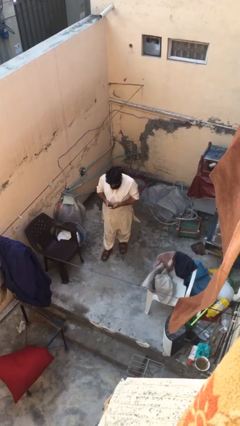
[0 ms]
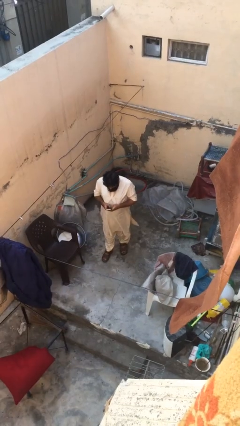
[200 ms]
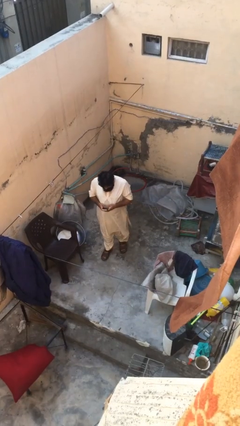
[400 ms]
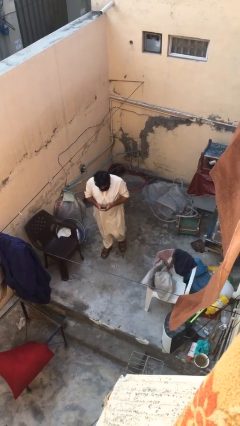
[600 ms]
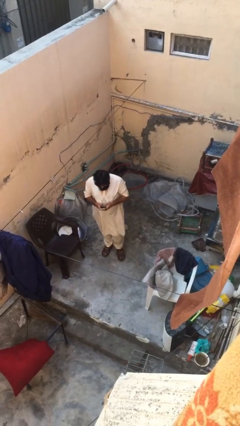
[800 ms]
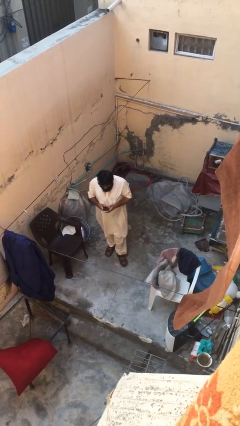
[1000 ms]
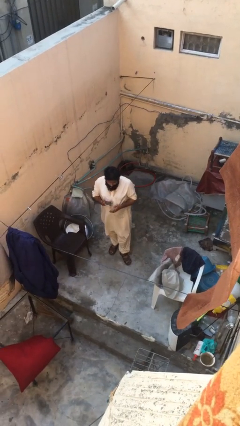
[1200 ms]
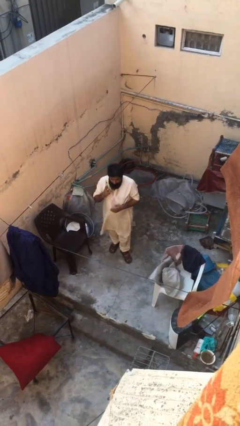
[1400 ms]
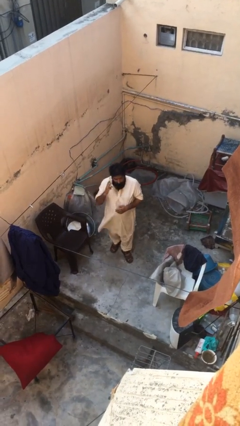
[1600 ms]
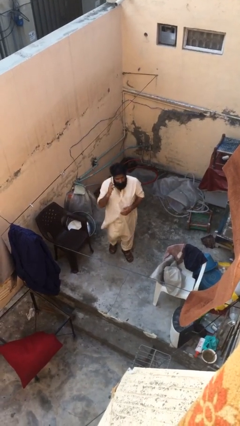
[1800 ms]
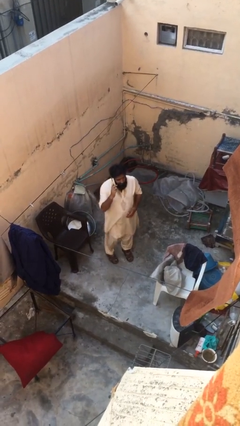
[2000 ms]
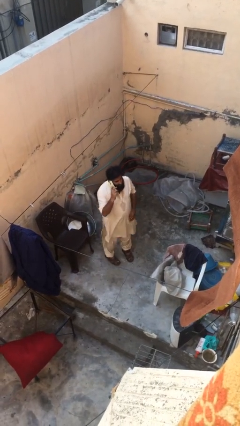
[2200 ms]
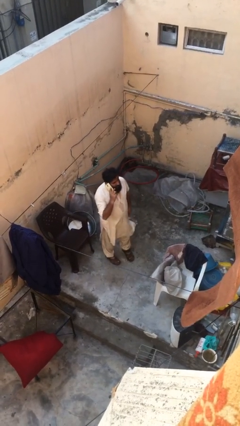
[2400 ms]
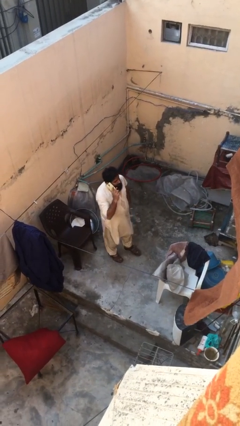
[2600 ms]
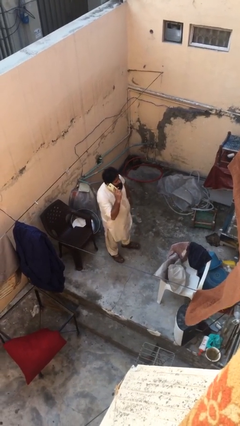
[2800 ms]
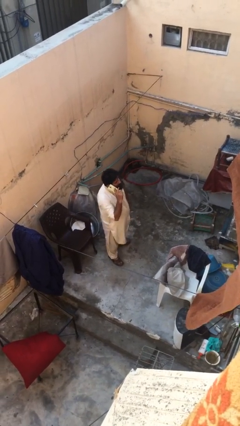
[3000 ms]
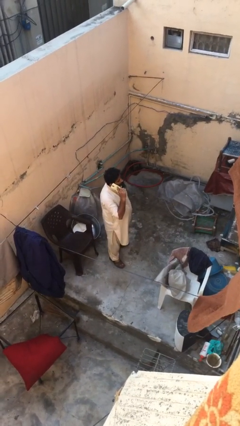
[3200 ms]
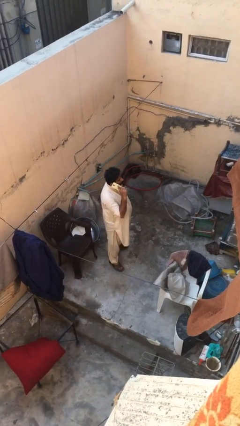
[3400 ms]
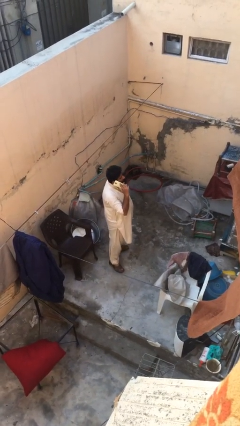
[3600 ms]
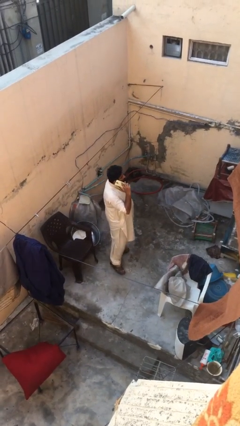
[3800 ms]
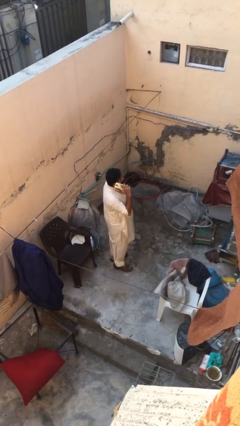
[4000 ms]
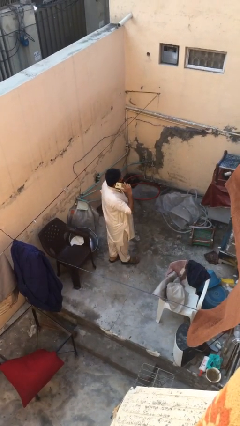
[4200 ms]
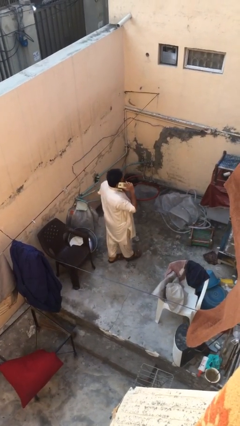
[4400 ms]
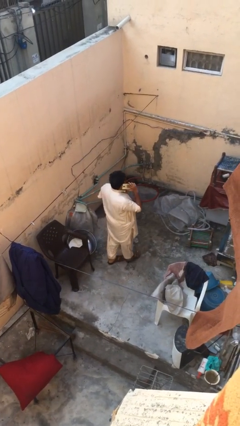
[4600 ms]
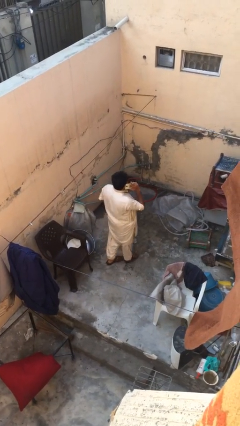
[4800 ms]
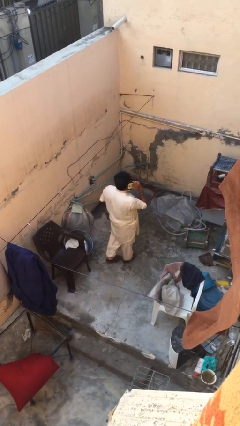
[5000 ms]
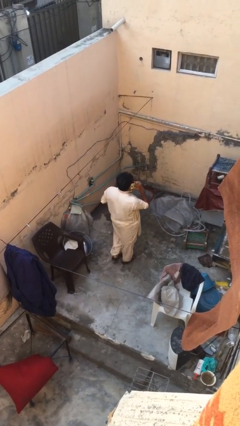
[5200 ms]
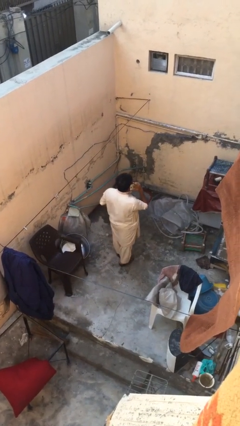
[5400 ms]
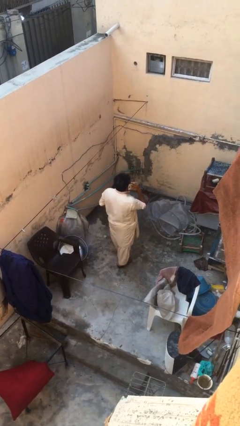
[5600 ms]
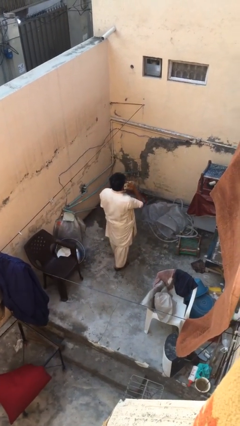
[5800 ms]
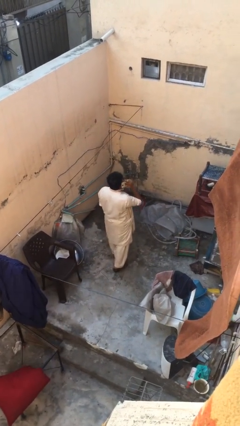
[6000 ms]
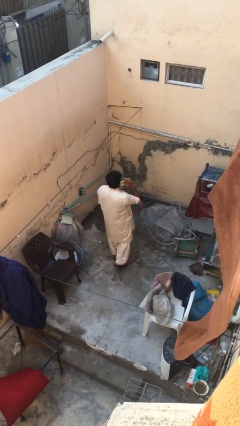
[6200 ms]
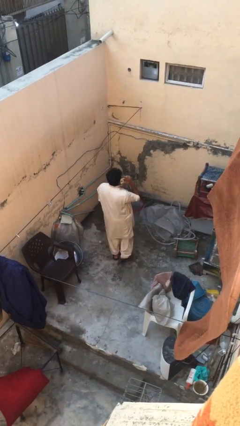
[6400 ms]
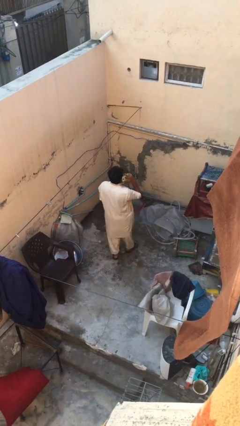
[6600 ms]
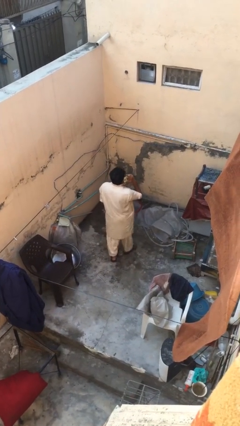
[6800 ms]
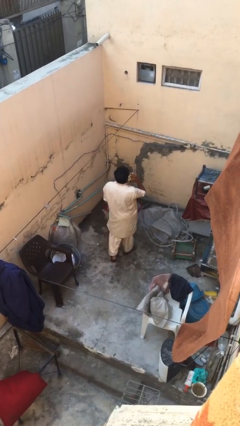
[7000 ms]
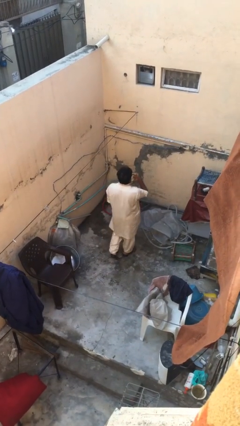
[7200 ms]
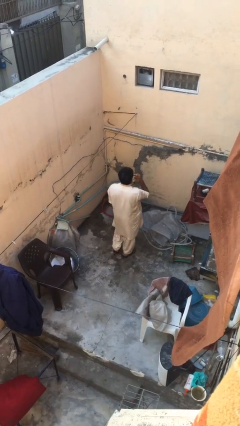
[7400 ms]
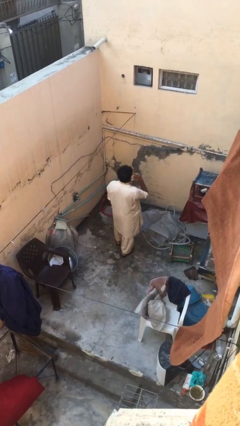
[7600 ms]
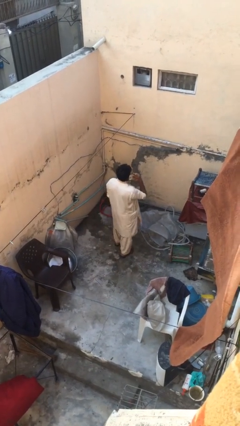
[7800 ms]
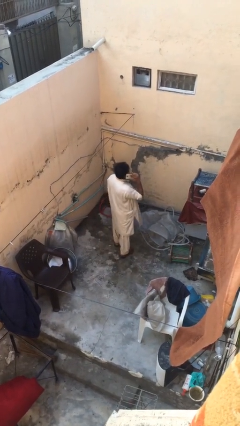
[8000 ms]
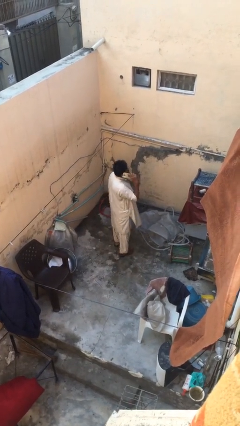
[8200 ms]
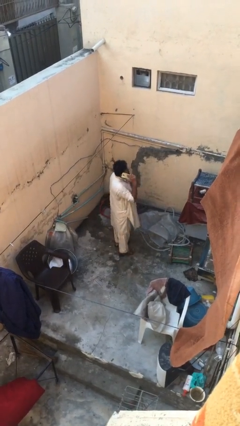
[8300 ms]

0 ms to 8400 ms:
person talks on phone

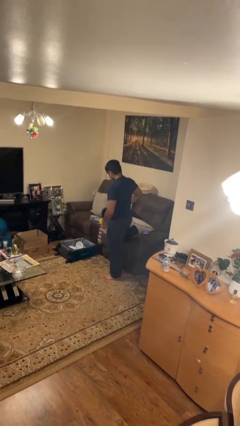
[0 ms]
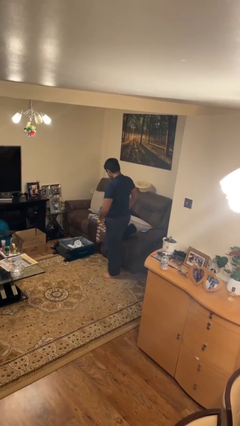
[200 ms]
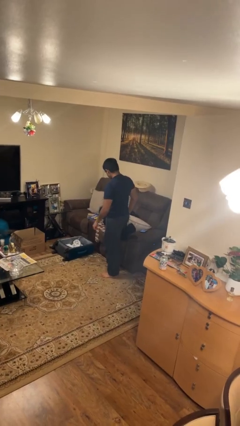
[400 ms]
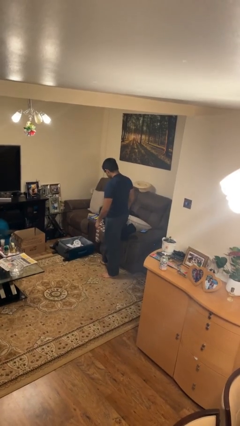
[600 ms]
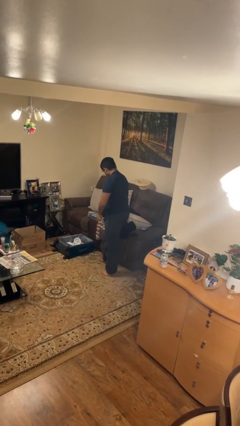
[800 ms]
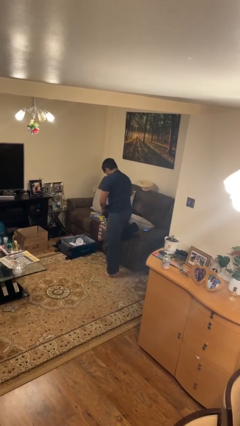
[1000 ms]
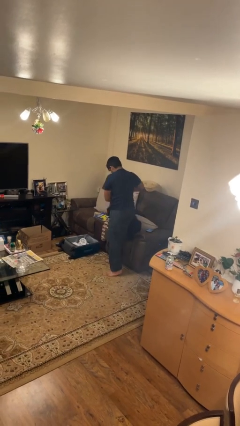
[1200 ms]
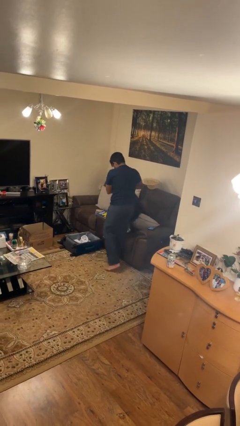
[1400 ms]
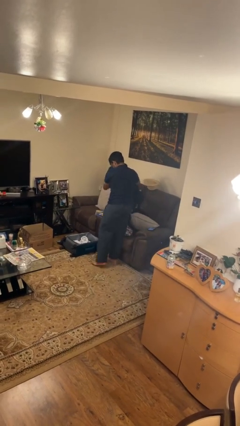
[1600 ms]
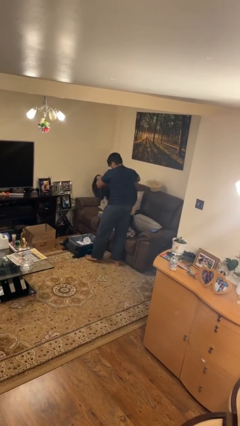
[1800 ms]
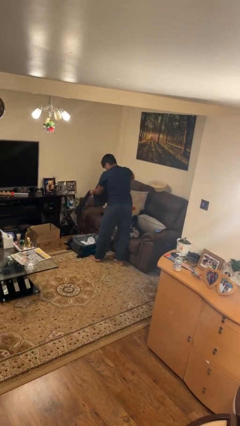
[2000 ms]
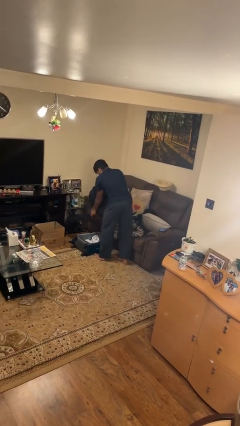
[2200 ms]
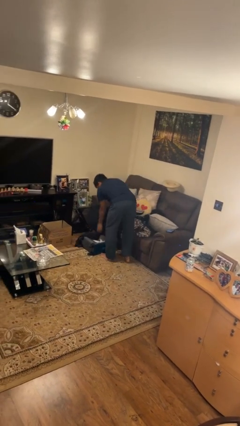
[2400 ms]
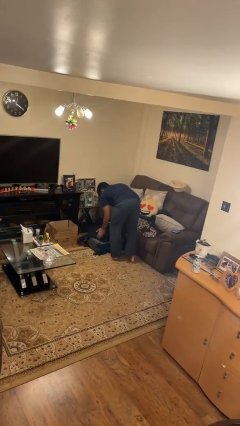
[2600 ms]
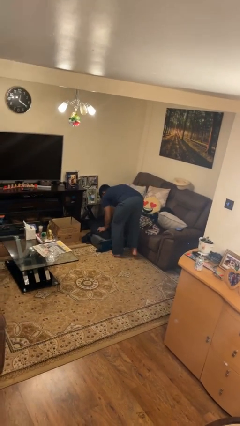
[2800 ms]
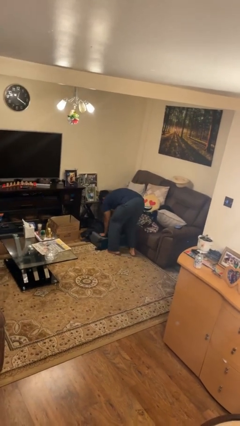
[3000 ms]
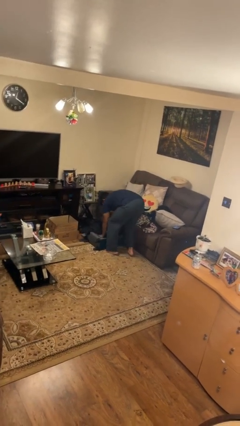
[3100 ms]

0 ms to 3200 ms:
person loads clothes into suitcase

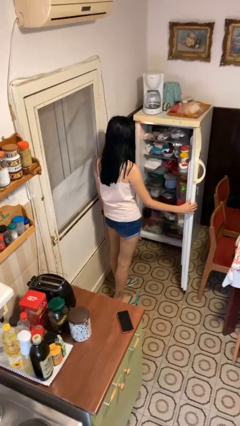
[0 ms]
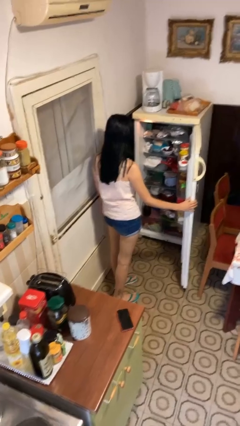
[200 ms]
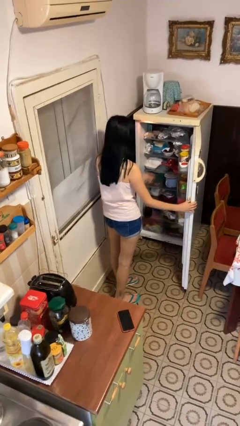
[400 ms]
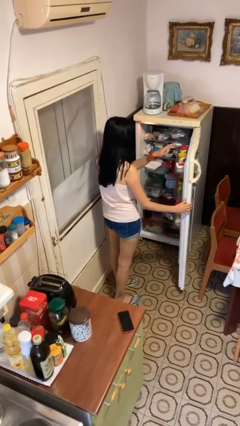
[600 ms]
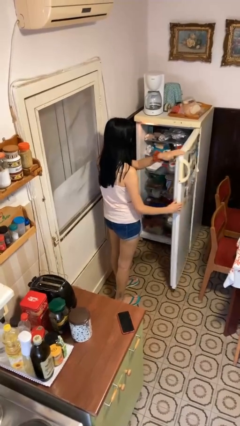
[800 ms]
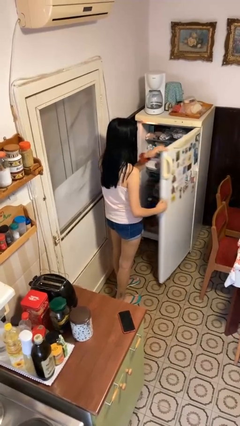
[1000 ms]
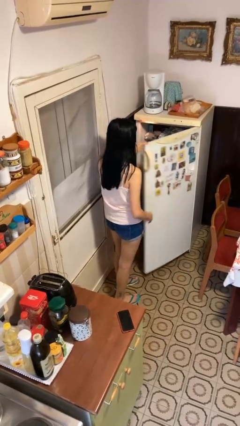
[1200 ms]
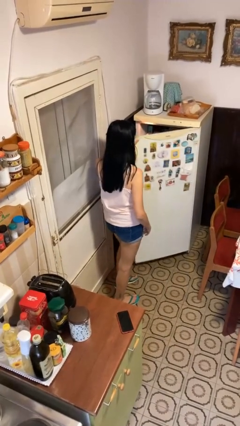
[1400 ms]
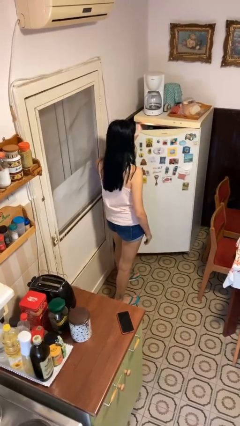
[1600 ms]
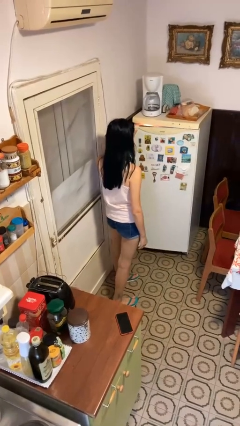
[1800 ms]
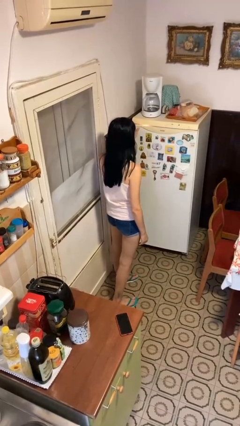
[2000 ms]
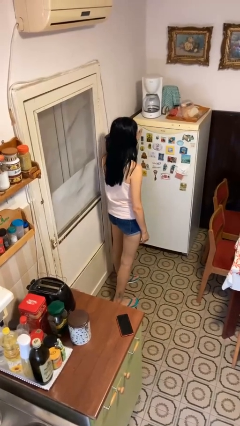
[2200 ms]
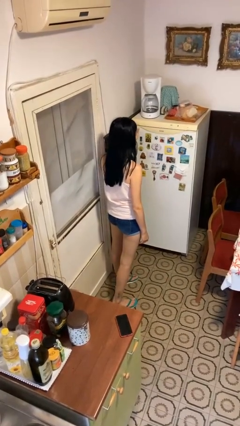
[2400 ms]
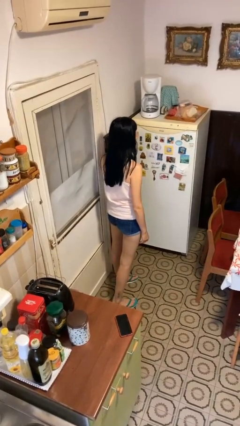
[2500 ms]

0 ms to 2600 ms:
person closes refrigerator

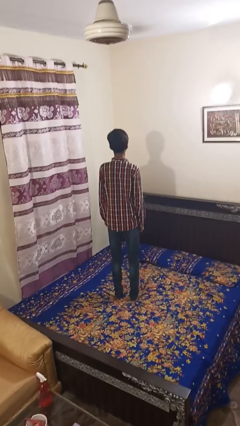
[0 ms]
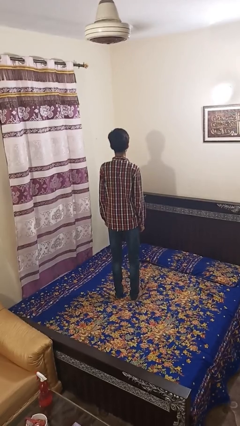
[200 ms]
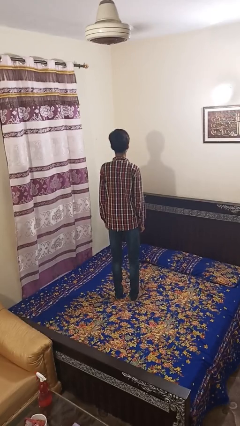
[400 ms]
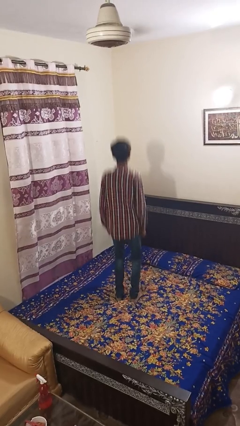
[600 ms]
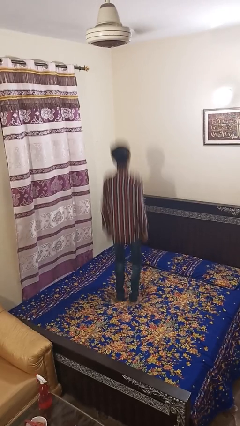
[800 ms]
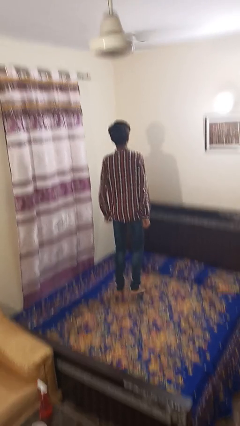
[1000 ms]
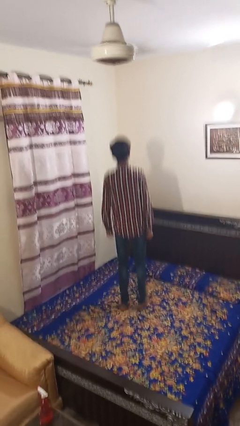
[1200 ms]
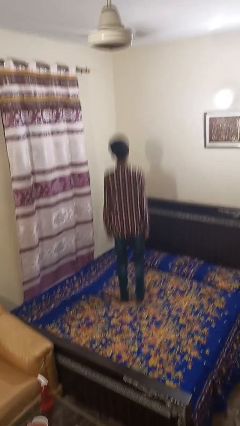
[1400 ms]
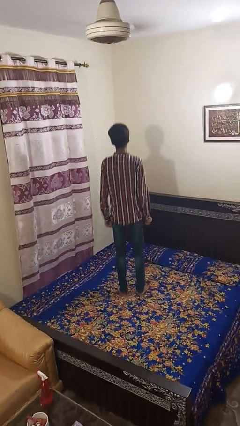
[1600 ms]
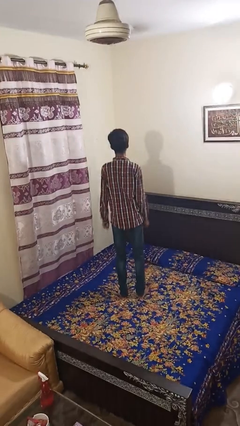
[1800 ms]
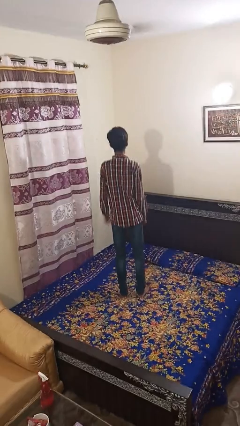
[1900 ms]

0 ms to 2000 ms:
person jumps on bed

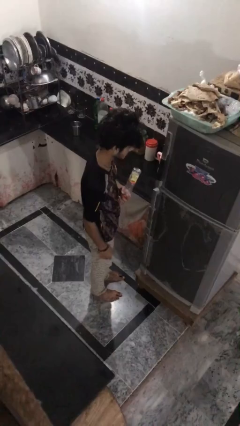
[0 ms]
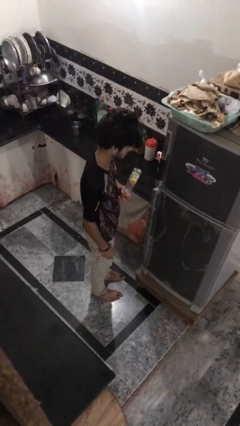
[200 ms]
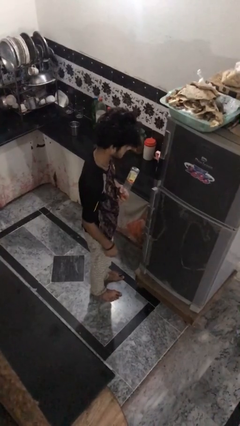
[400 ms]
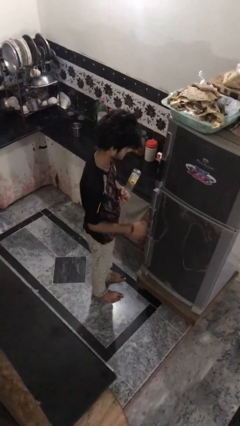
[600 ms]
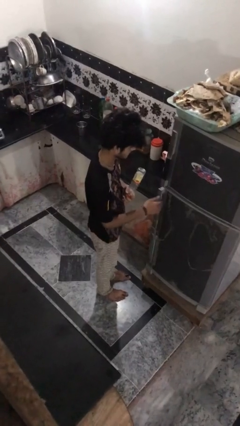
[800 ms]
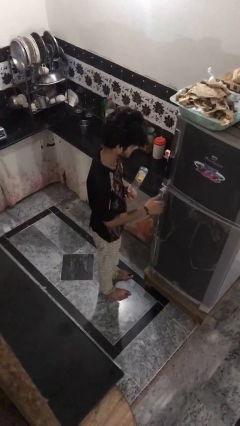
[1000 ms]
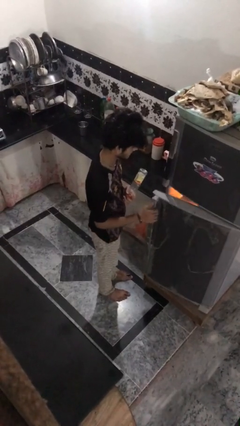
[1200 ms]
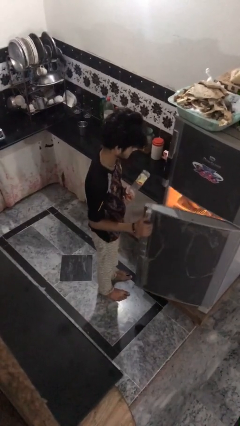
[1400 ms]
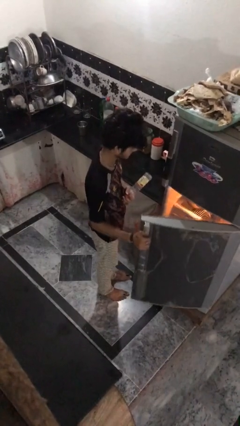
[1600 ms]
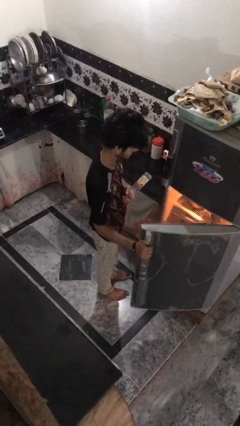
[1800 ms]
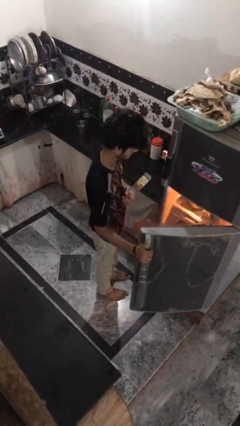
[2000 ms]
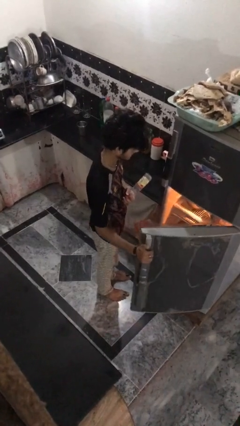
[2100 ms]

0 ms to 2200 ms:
person opens refrigerator
